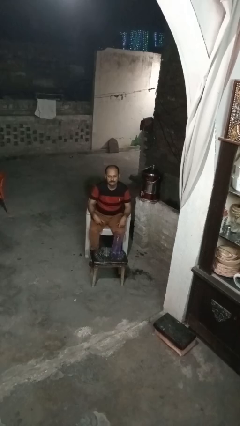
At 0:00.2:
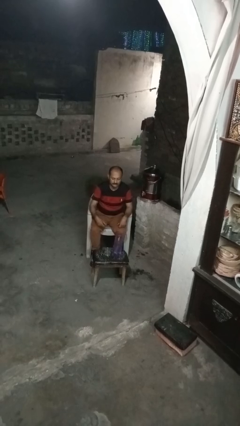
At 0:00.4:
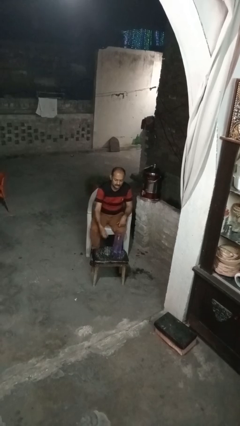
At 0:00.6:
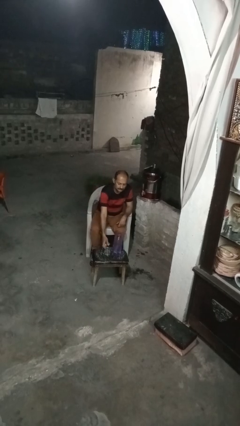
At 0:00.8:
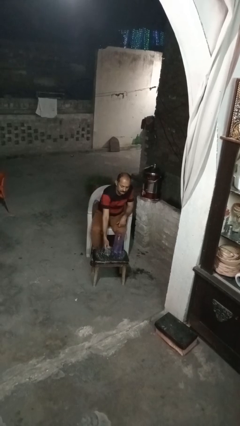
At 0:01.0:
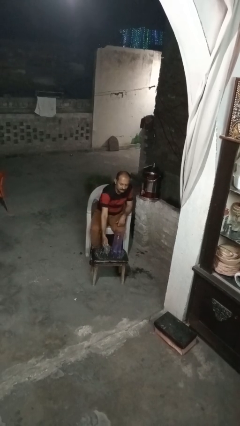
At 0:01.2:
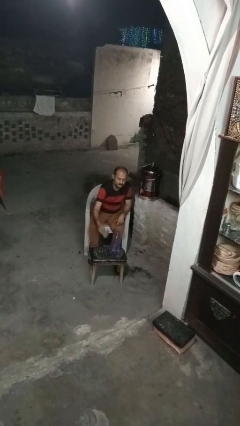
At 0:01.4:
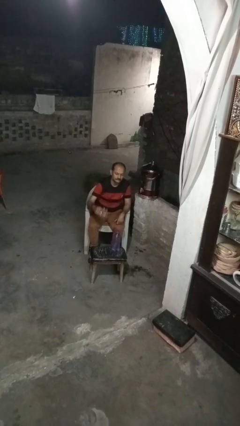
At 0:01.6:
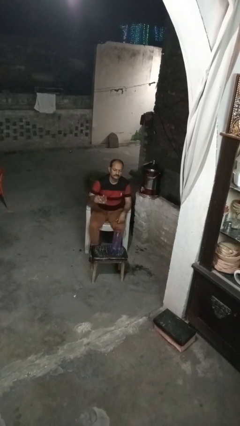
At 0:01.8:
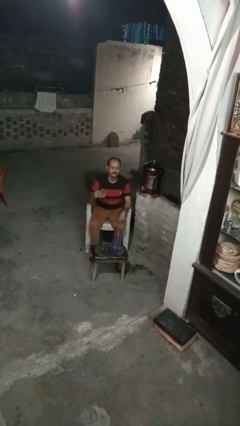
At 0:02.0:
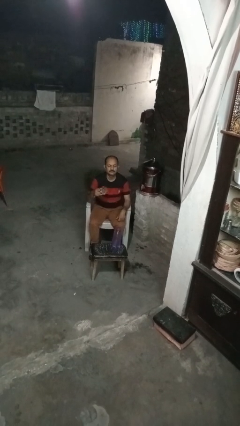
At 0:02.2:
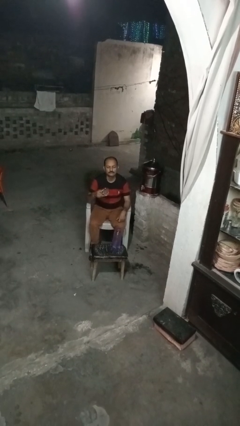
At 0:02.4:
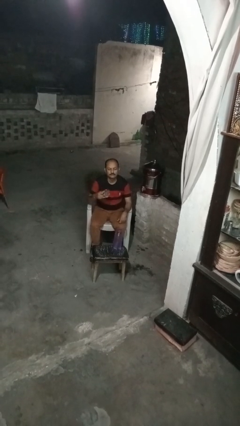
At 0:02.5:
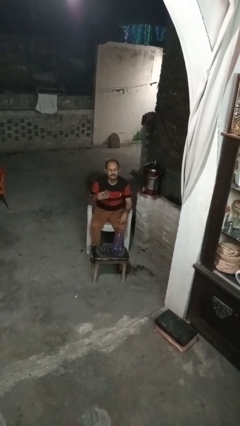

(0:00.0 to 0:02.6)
person picks up object from table

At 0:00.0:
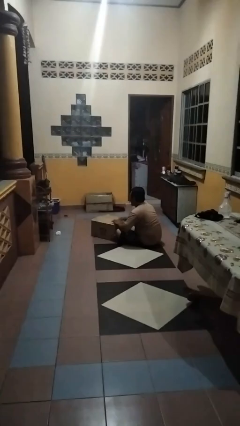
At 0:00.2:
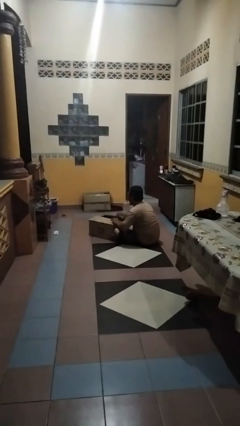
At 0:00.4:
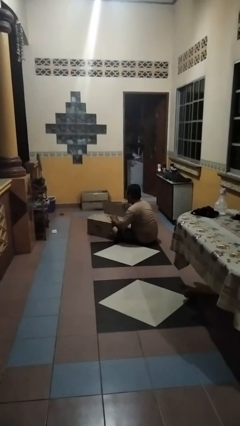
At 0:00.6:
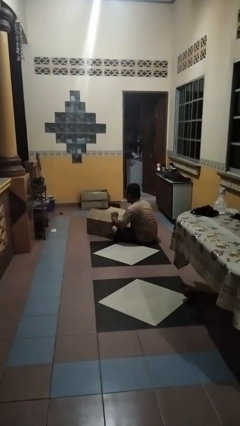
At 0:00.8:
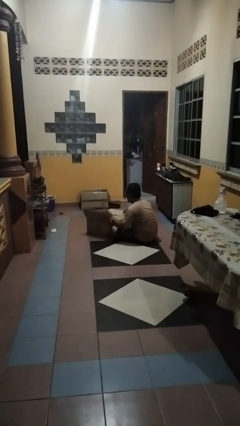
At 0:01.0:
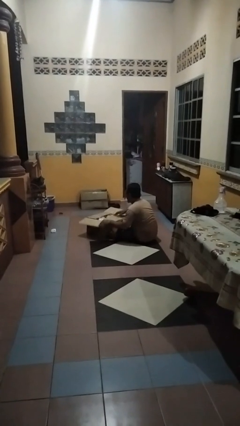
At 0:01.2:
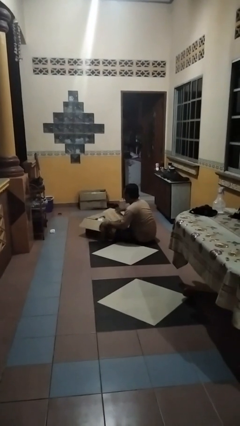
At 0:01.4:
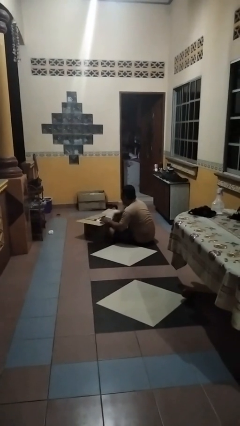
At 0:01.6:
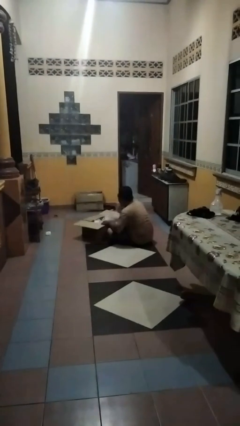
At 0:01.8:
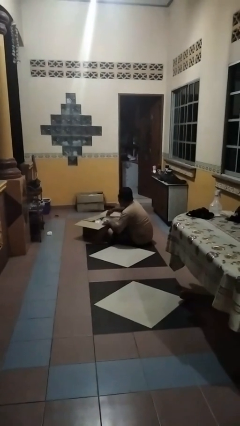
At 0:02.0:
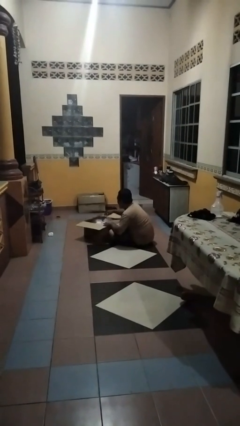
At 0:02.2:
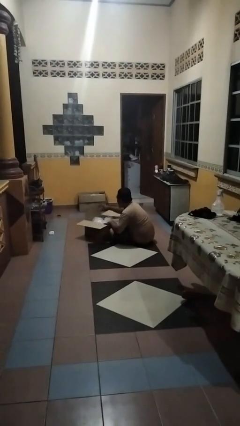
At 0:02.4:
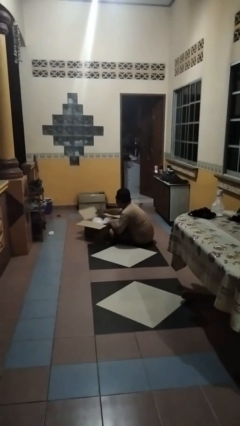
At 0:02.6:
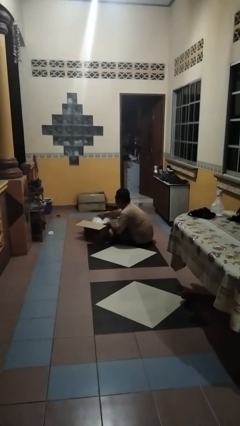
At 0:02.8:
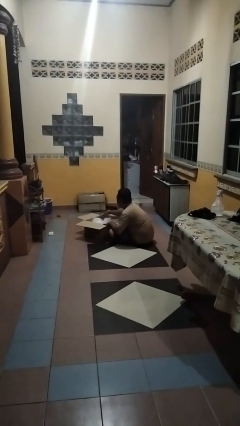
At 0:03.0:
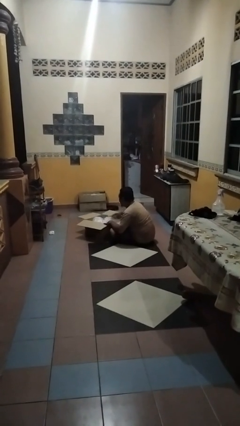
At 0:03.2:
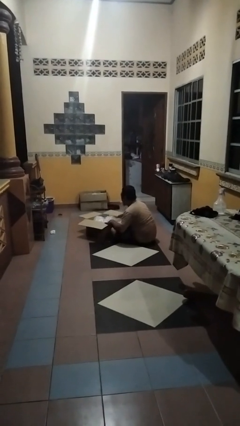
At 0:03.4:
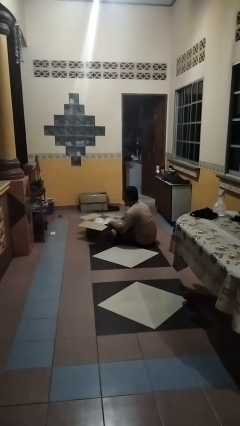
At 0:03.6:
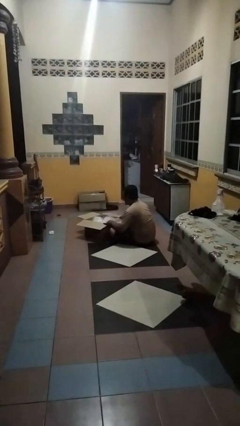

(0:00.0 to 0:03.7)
person opens box

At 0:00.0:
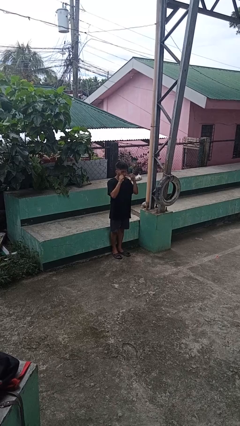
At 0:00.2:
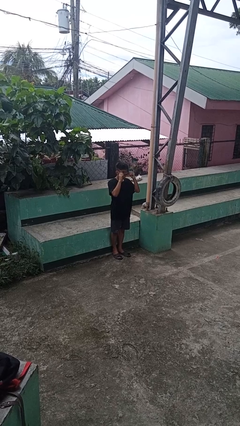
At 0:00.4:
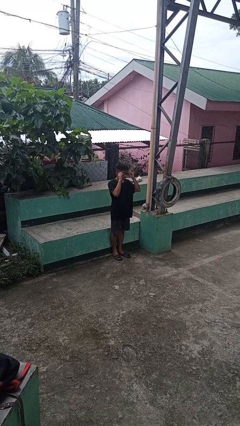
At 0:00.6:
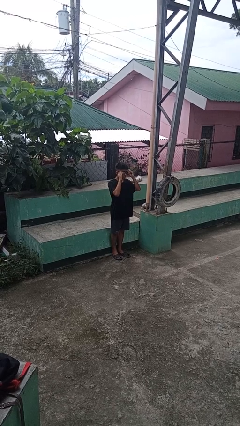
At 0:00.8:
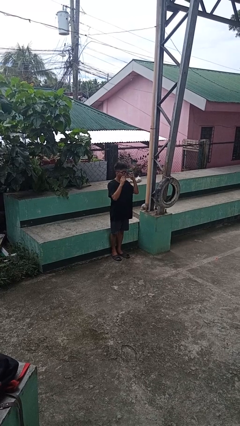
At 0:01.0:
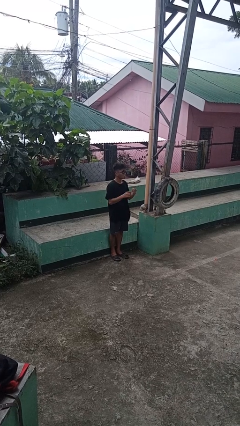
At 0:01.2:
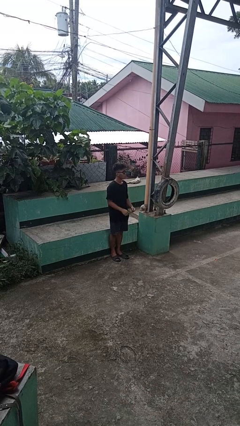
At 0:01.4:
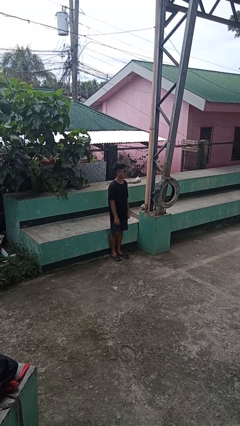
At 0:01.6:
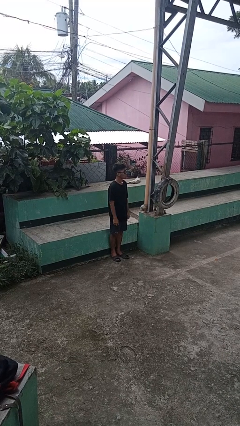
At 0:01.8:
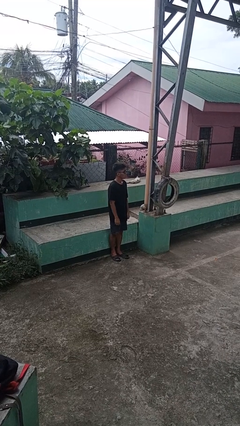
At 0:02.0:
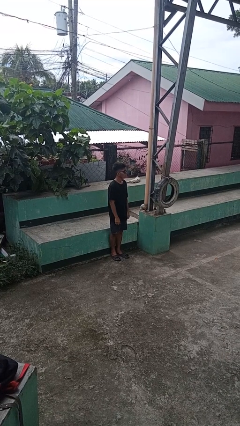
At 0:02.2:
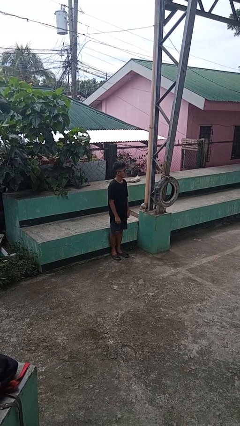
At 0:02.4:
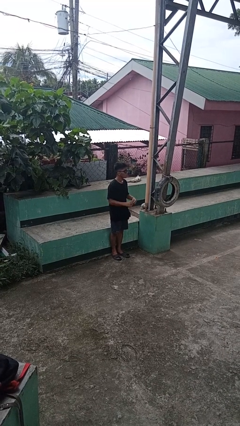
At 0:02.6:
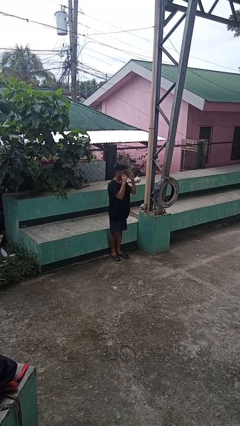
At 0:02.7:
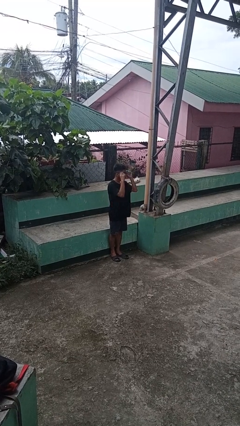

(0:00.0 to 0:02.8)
person puts on sunglasses

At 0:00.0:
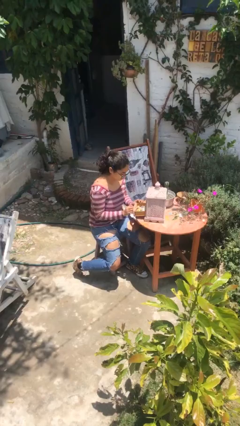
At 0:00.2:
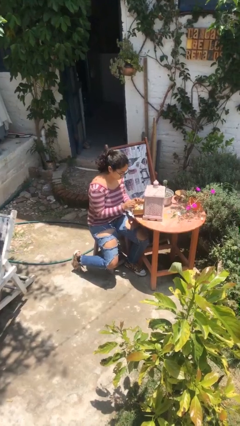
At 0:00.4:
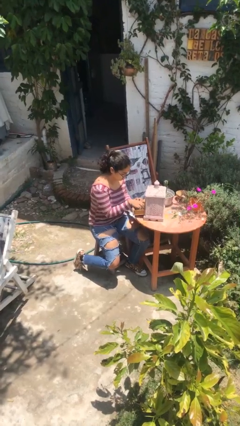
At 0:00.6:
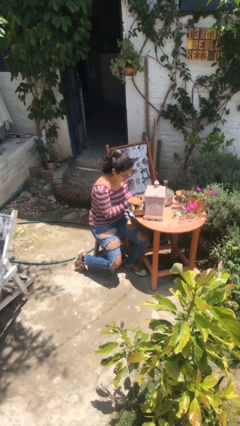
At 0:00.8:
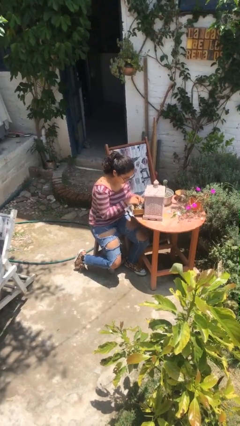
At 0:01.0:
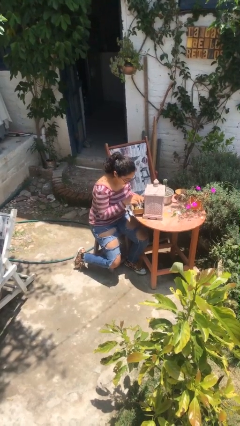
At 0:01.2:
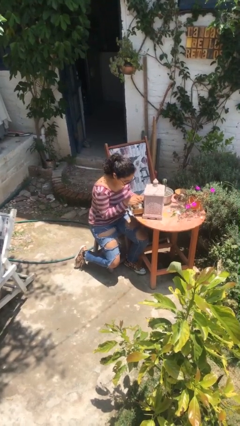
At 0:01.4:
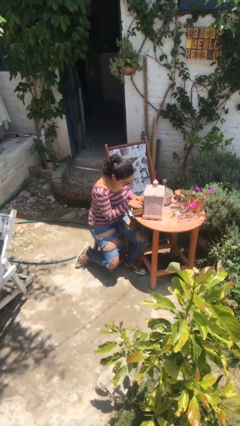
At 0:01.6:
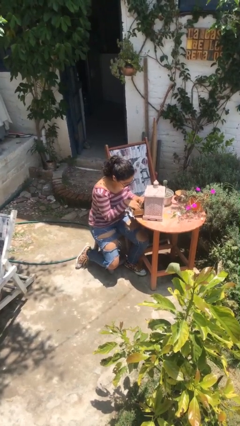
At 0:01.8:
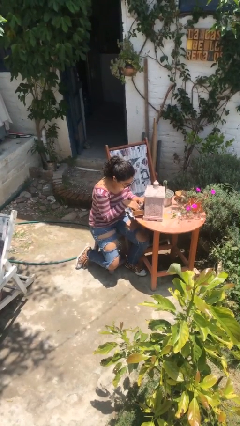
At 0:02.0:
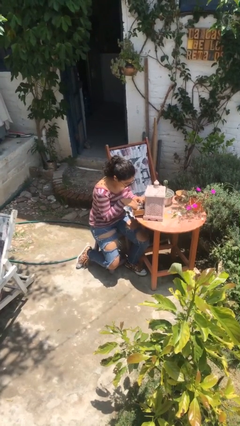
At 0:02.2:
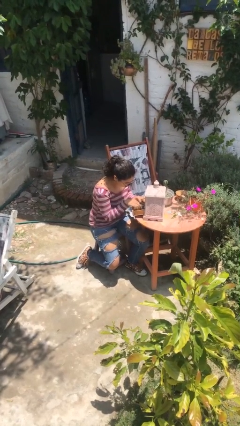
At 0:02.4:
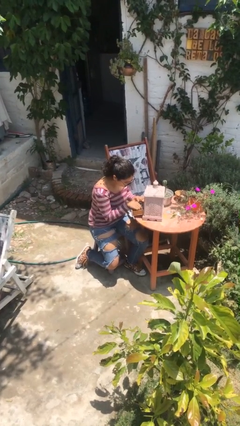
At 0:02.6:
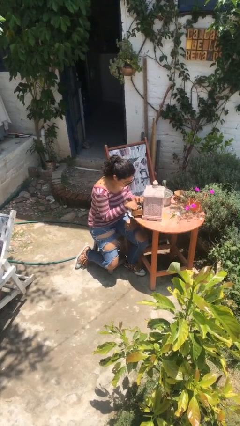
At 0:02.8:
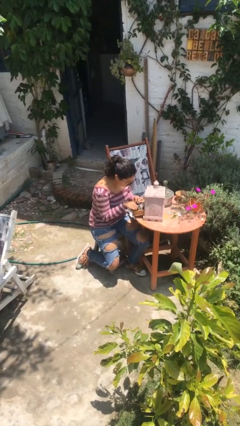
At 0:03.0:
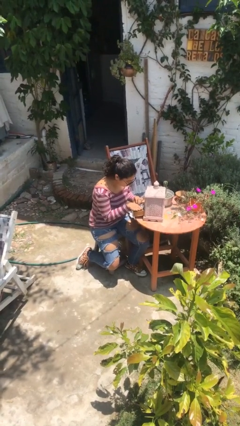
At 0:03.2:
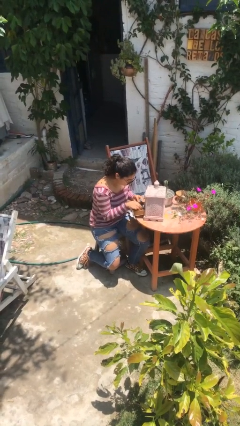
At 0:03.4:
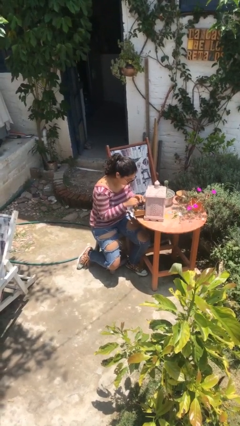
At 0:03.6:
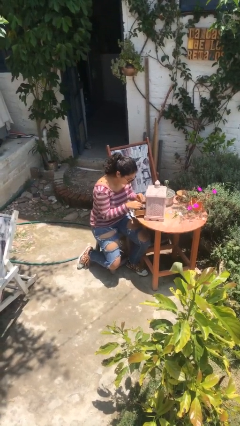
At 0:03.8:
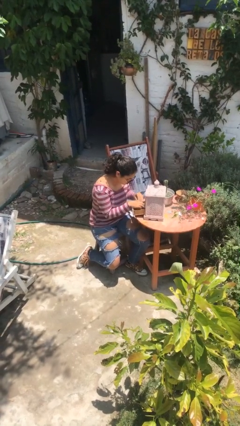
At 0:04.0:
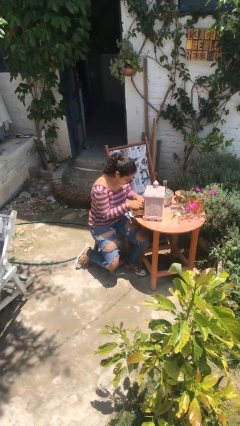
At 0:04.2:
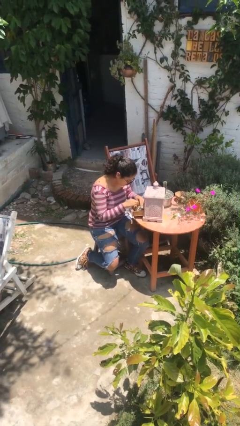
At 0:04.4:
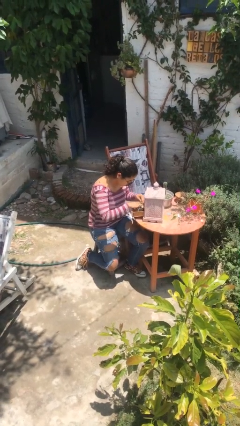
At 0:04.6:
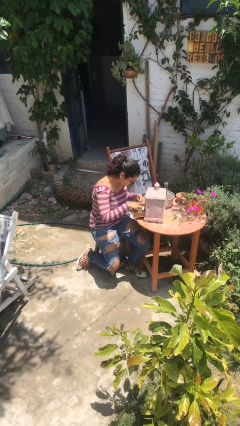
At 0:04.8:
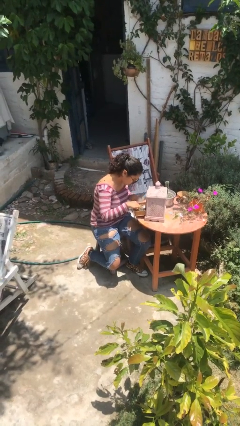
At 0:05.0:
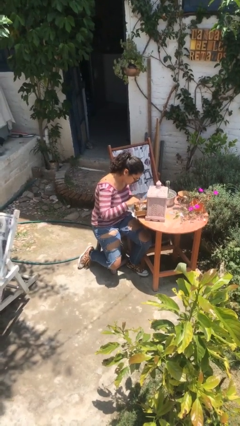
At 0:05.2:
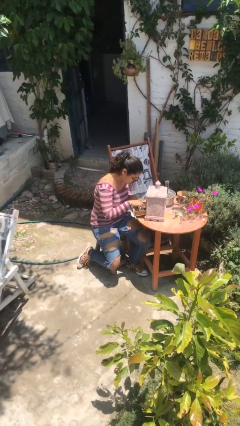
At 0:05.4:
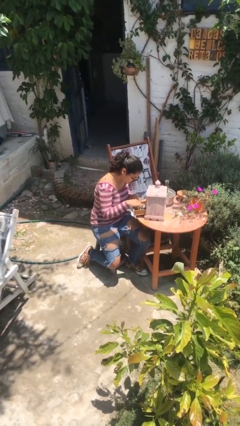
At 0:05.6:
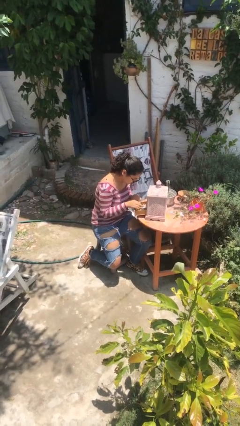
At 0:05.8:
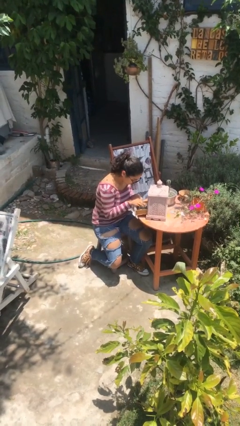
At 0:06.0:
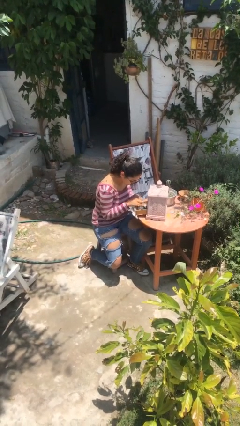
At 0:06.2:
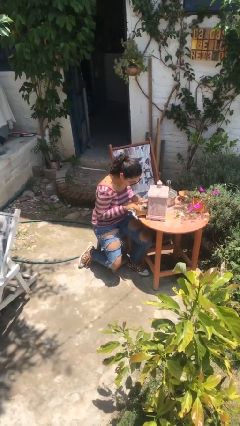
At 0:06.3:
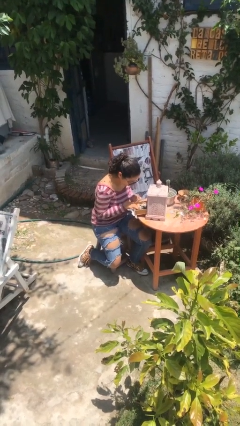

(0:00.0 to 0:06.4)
person searches jewelry box

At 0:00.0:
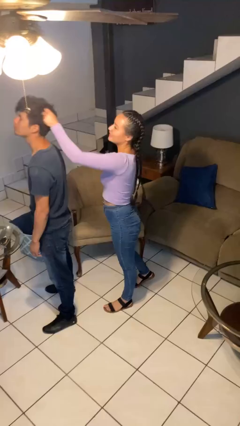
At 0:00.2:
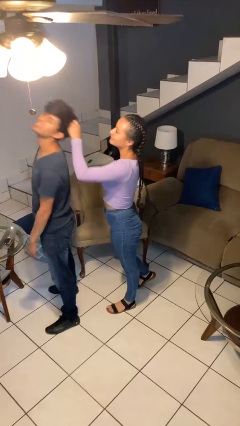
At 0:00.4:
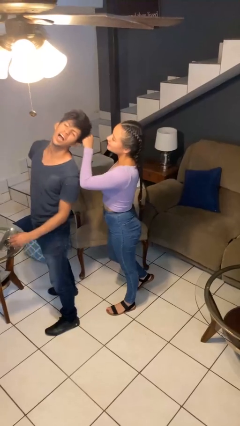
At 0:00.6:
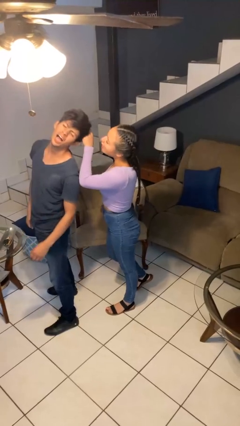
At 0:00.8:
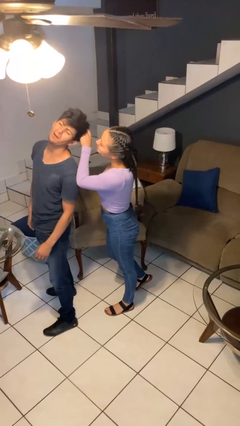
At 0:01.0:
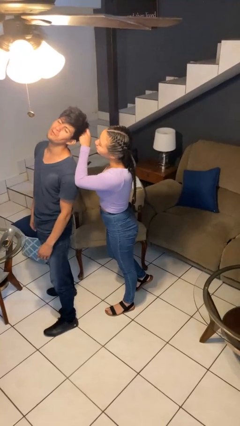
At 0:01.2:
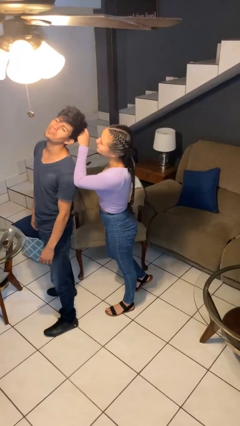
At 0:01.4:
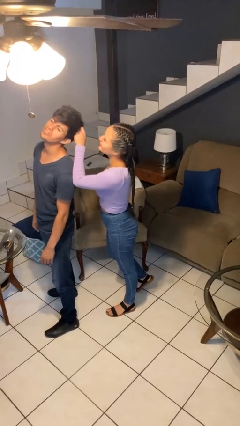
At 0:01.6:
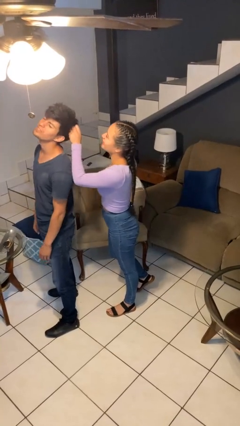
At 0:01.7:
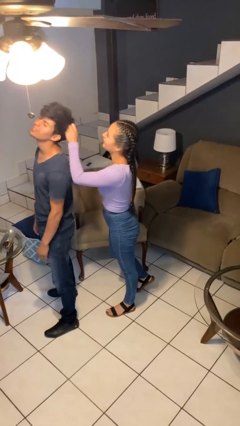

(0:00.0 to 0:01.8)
person grabs person by hair

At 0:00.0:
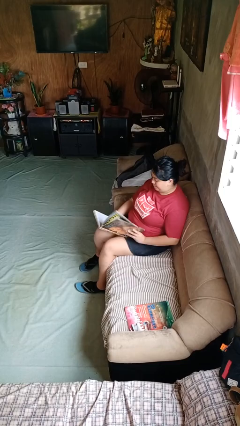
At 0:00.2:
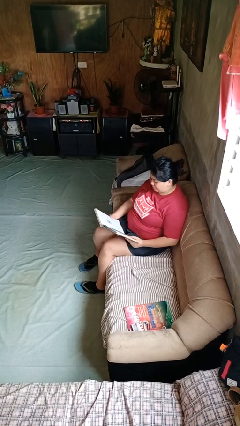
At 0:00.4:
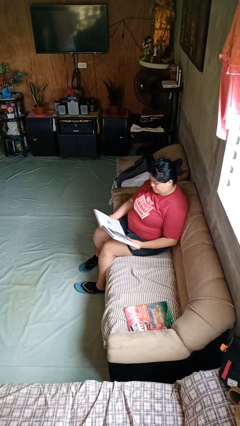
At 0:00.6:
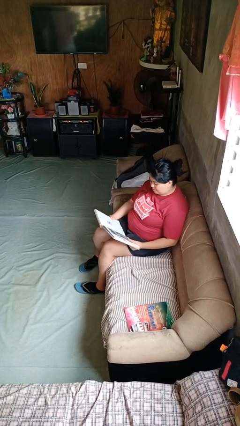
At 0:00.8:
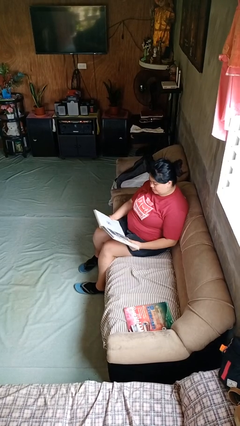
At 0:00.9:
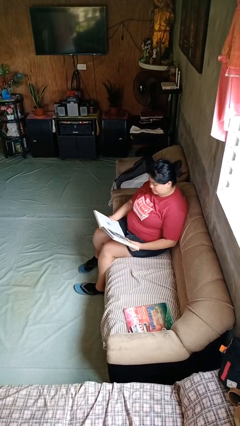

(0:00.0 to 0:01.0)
person reads book
